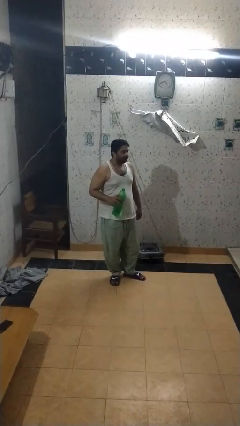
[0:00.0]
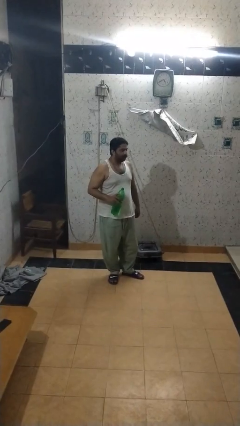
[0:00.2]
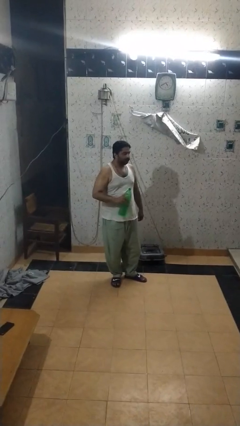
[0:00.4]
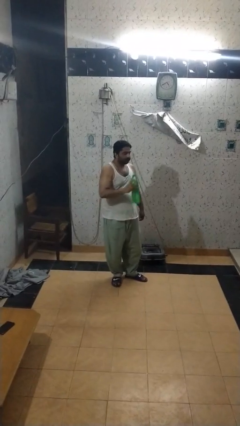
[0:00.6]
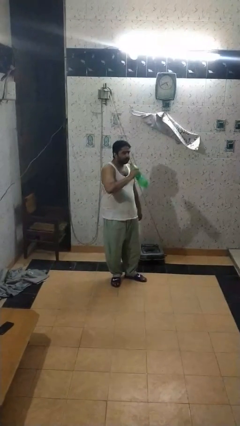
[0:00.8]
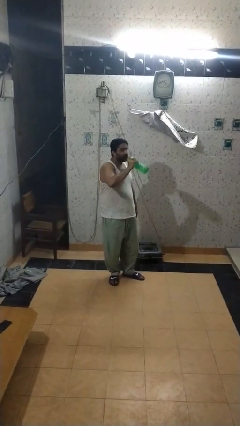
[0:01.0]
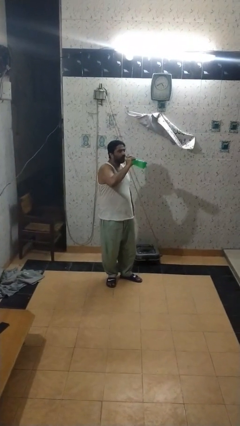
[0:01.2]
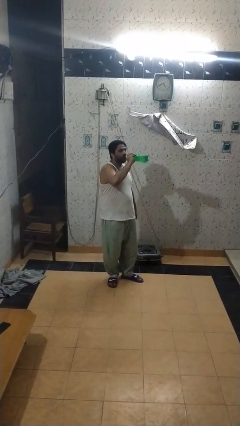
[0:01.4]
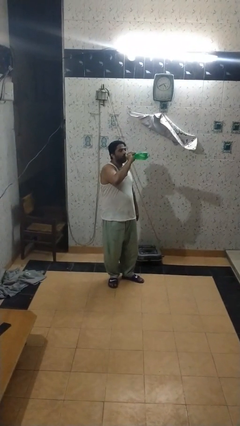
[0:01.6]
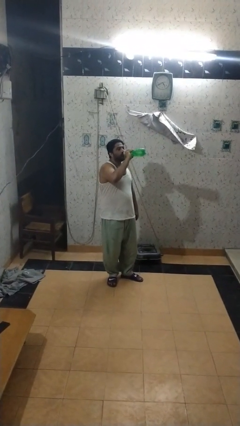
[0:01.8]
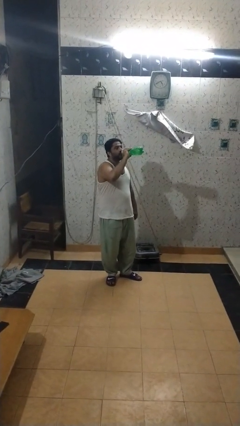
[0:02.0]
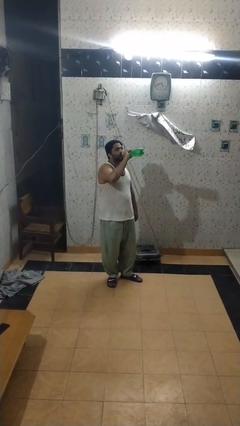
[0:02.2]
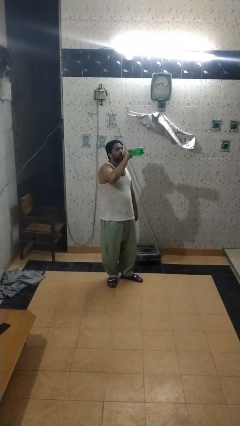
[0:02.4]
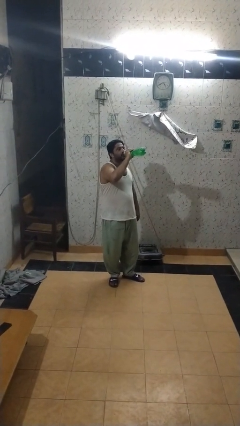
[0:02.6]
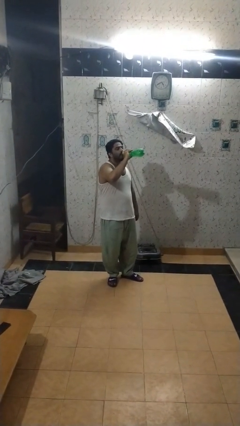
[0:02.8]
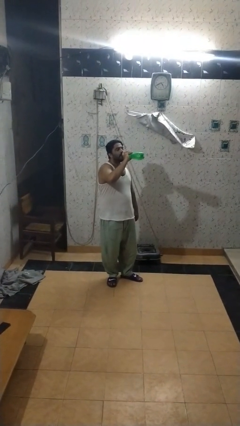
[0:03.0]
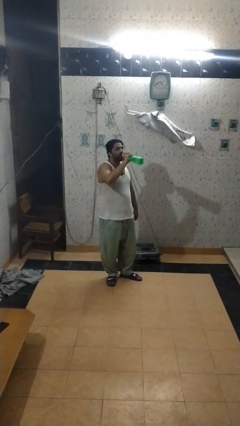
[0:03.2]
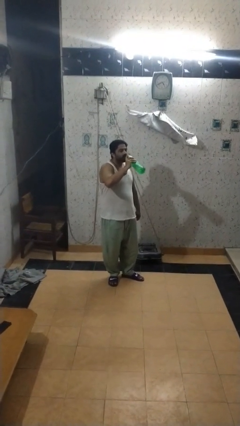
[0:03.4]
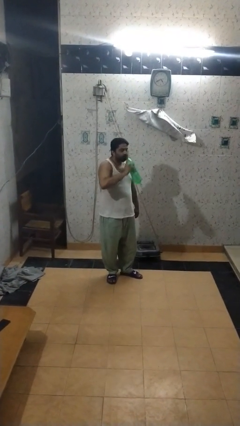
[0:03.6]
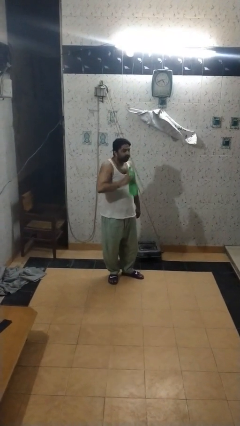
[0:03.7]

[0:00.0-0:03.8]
person drinks from bottle

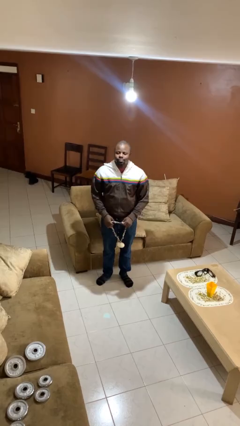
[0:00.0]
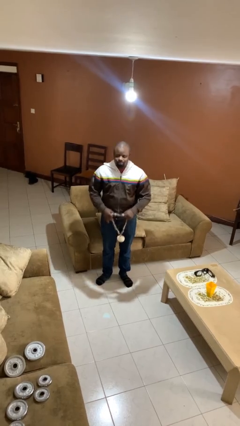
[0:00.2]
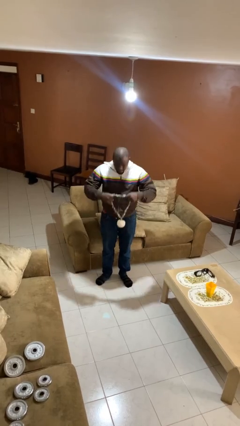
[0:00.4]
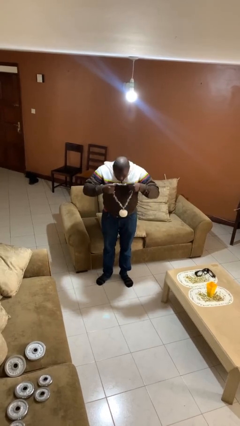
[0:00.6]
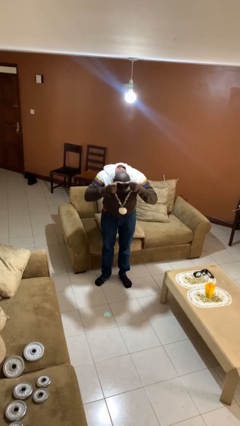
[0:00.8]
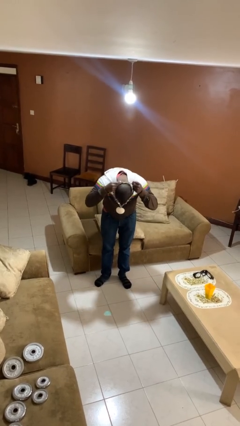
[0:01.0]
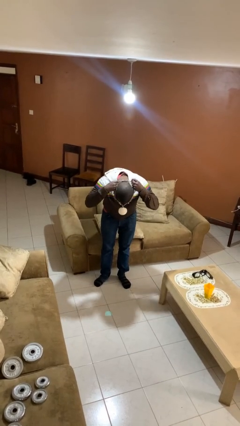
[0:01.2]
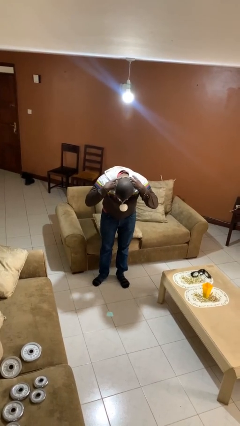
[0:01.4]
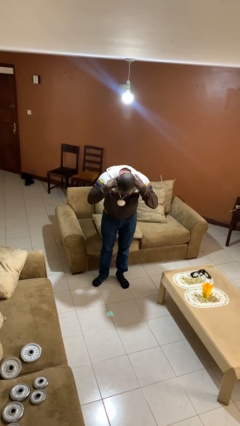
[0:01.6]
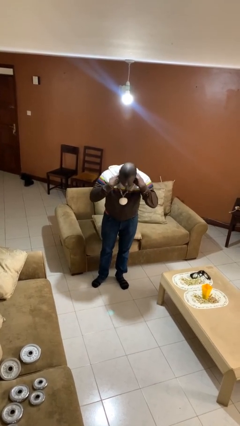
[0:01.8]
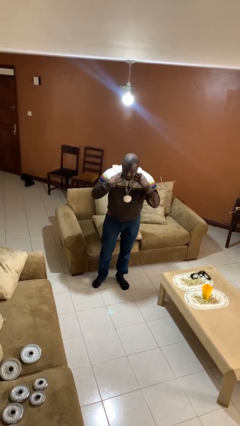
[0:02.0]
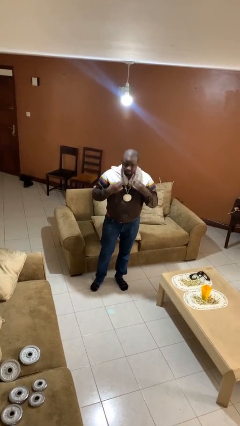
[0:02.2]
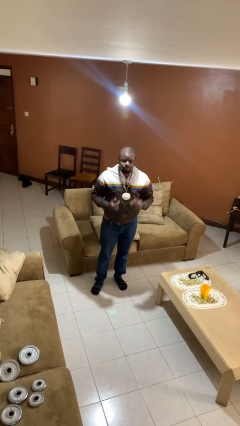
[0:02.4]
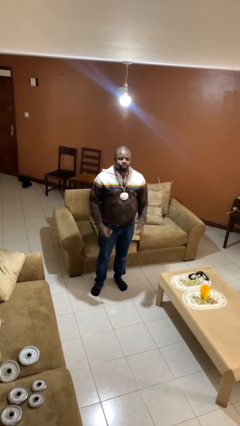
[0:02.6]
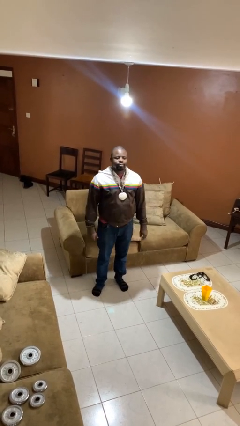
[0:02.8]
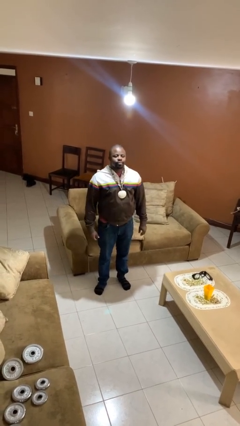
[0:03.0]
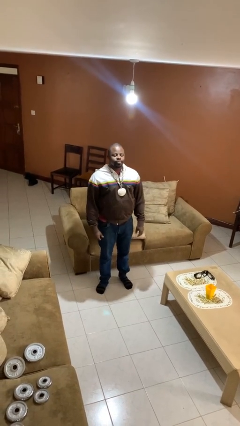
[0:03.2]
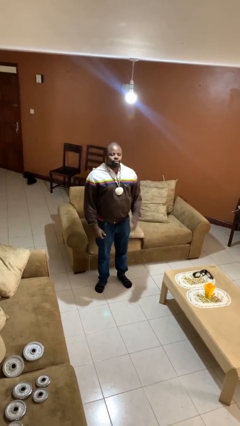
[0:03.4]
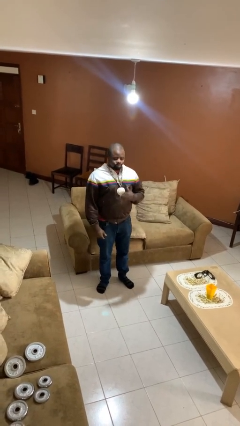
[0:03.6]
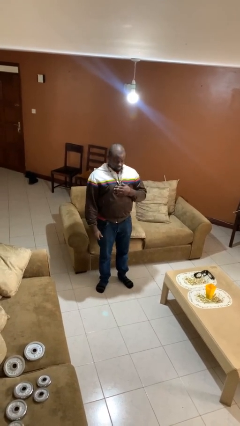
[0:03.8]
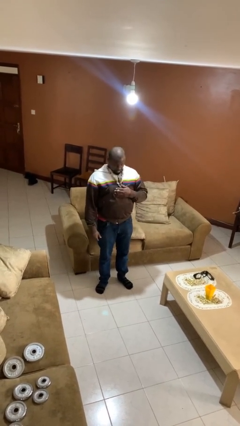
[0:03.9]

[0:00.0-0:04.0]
person puts on necklace

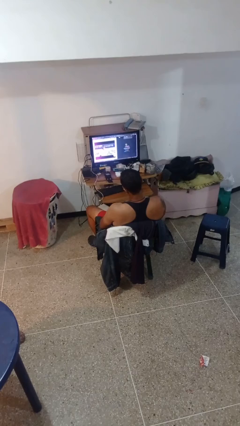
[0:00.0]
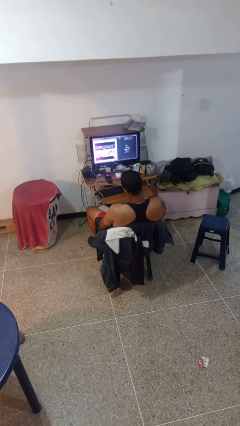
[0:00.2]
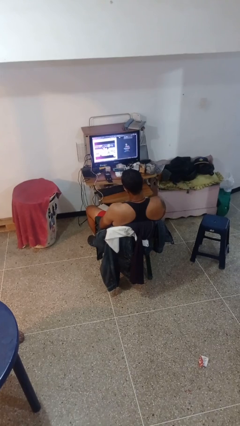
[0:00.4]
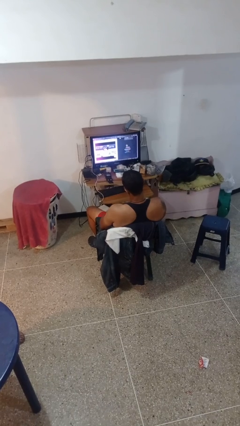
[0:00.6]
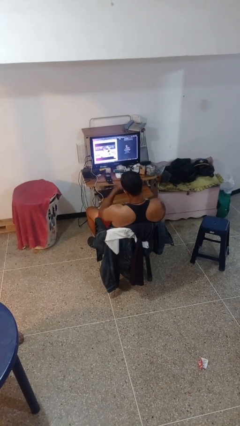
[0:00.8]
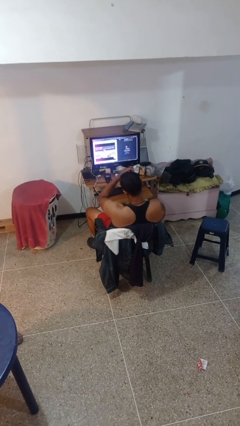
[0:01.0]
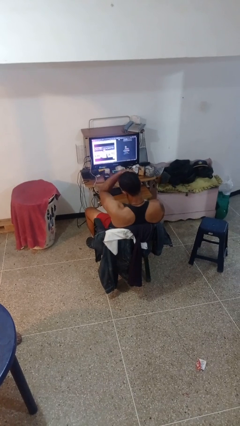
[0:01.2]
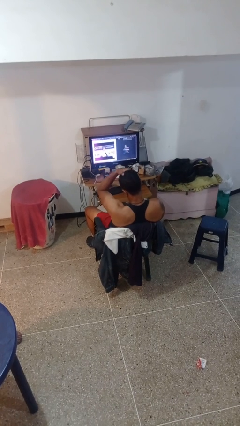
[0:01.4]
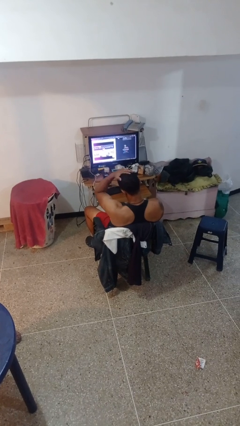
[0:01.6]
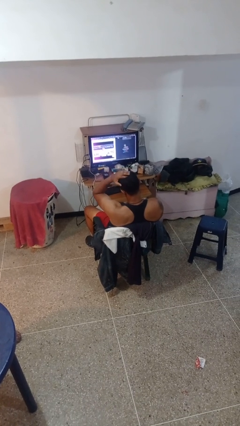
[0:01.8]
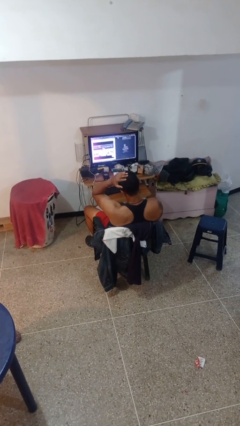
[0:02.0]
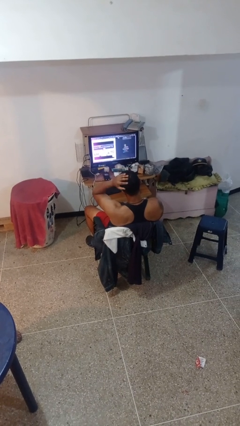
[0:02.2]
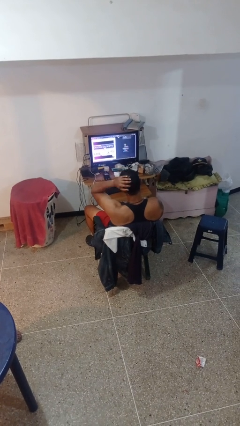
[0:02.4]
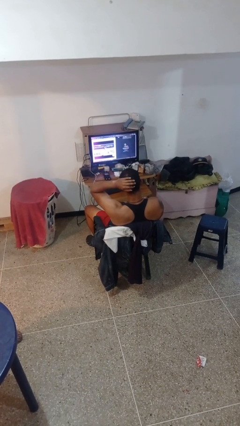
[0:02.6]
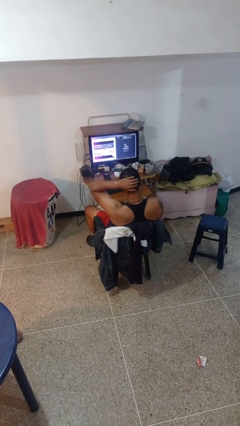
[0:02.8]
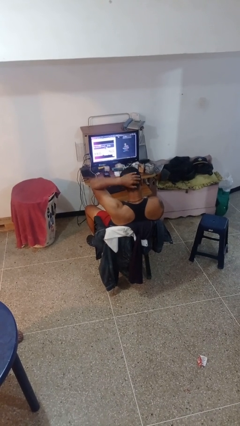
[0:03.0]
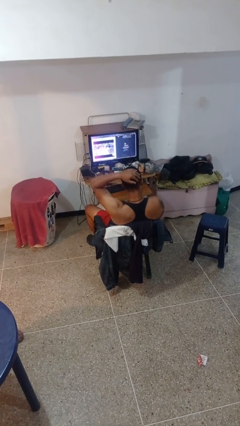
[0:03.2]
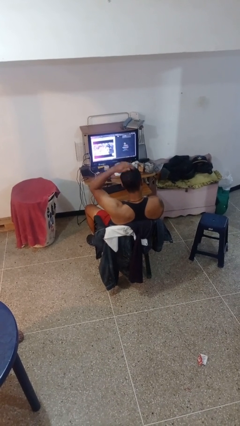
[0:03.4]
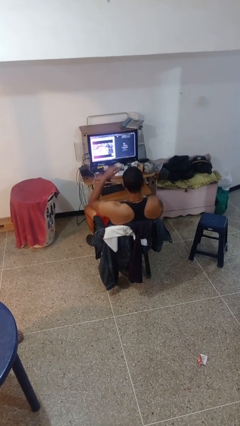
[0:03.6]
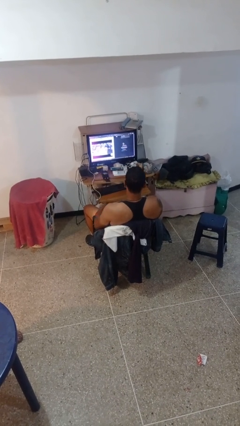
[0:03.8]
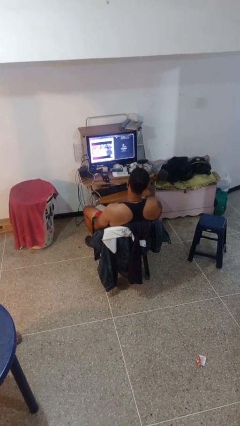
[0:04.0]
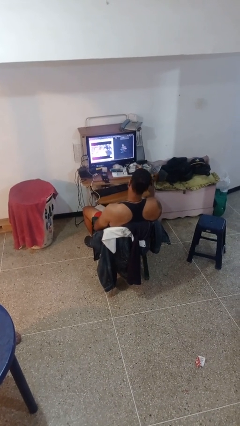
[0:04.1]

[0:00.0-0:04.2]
person pats head

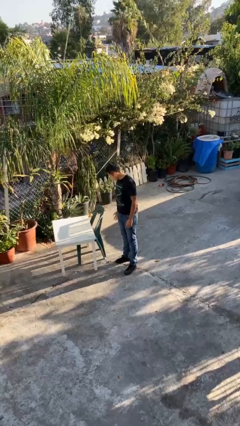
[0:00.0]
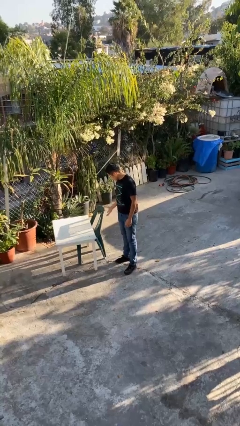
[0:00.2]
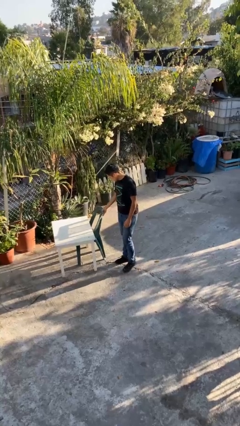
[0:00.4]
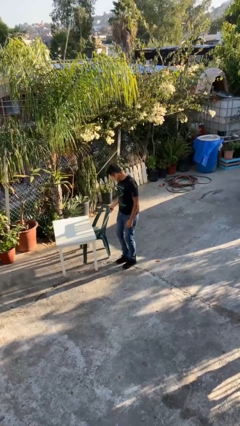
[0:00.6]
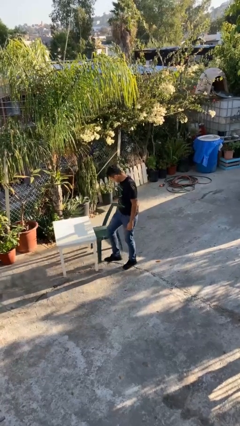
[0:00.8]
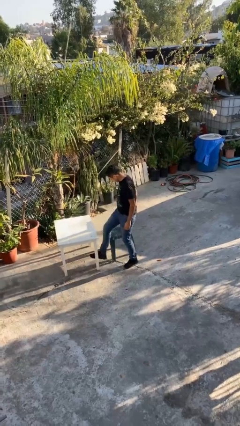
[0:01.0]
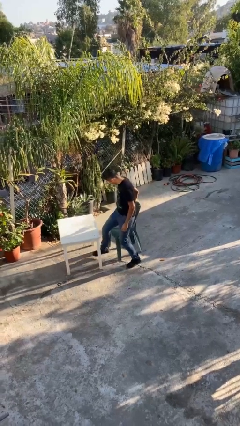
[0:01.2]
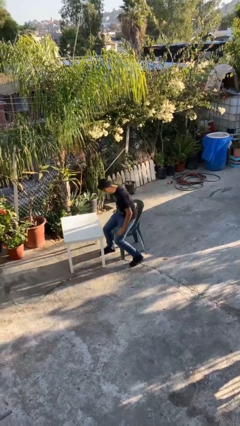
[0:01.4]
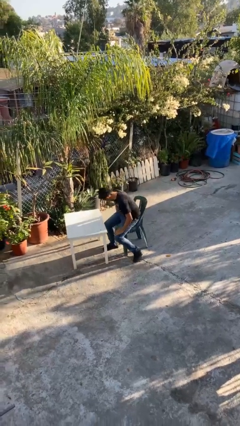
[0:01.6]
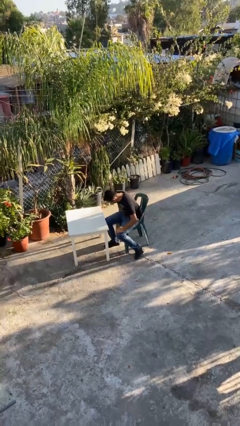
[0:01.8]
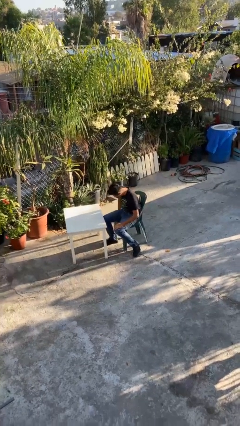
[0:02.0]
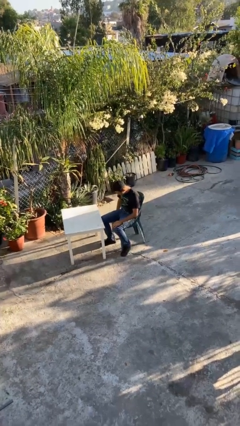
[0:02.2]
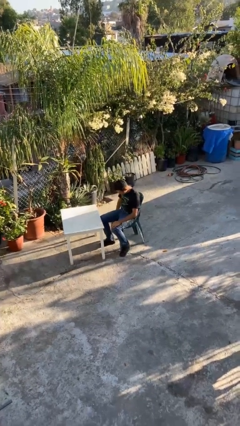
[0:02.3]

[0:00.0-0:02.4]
person sits down

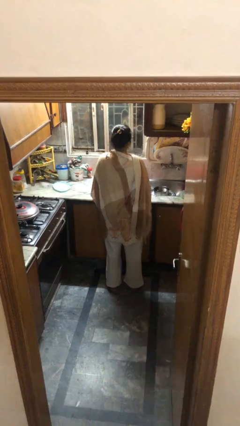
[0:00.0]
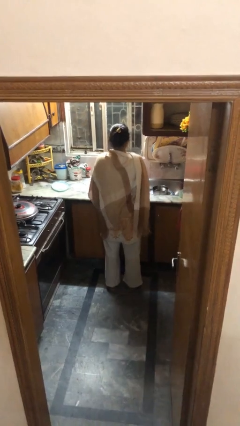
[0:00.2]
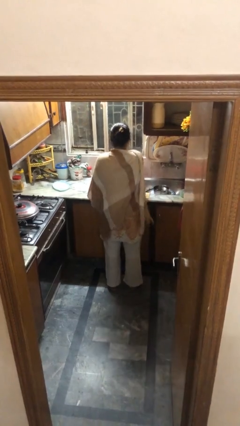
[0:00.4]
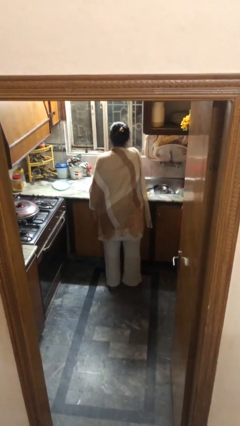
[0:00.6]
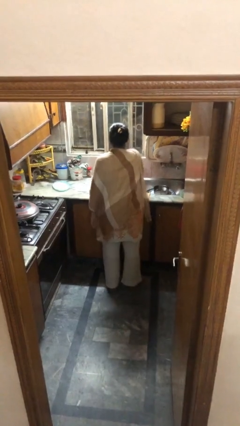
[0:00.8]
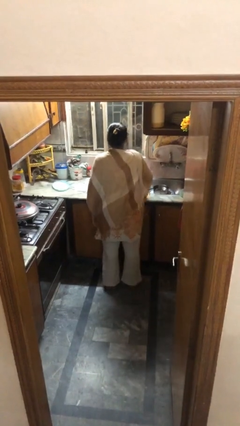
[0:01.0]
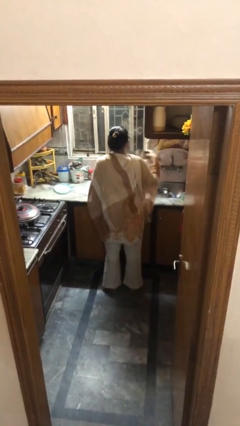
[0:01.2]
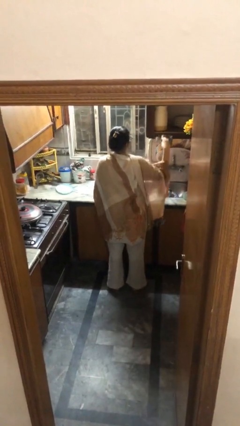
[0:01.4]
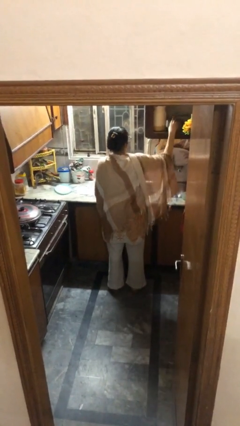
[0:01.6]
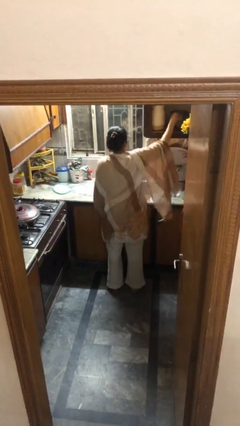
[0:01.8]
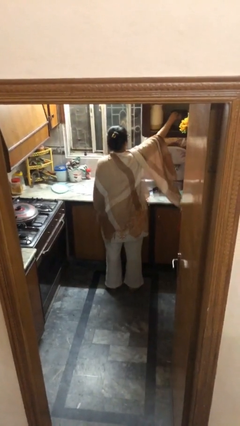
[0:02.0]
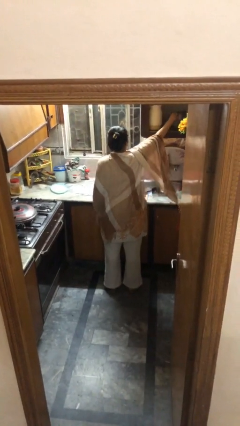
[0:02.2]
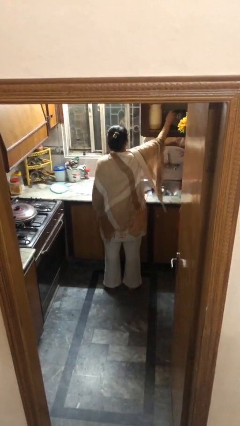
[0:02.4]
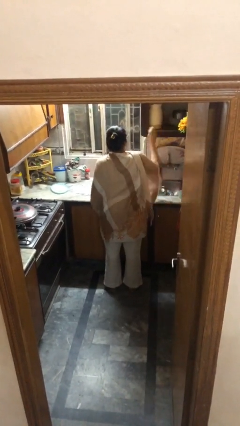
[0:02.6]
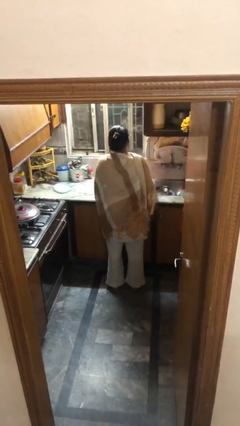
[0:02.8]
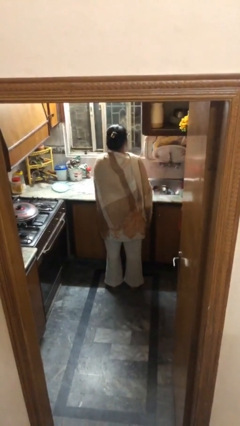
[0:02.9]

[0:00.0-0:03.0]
person puts object in cabinet

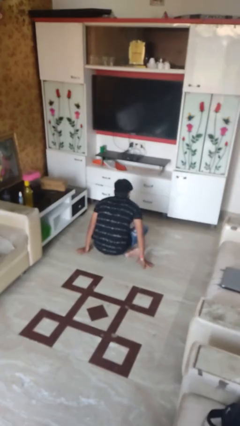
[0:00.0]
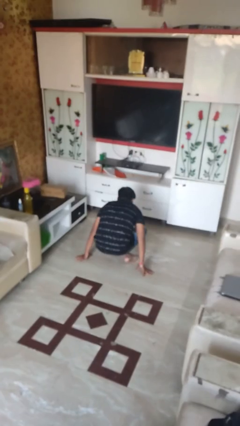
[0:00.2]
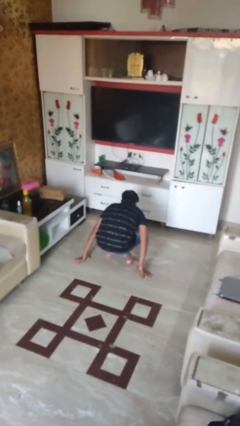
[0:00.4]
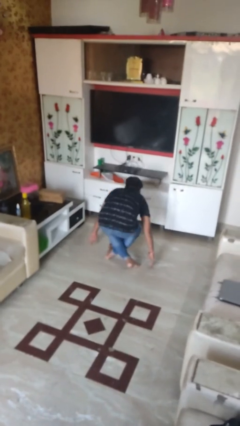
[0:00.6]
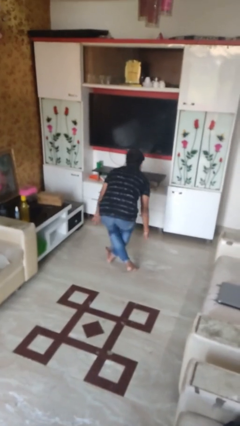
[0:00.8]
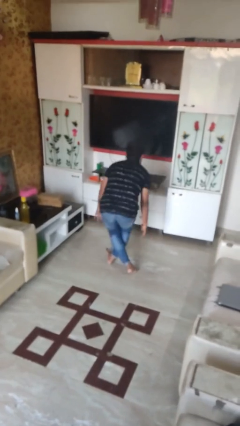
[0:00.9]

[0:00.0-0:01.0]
person stands up from floor
